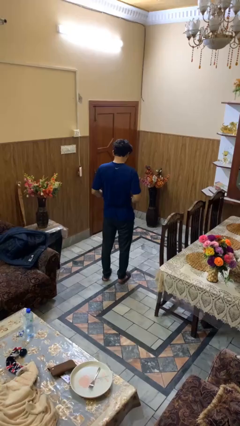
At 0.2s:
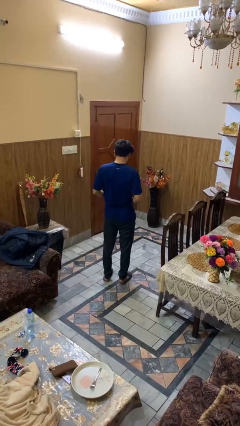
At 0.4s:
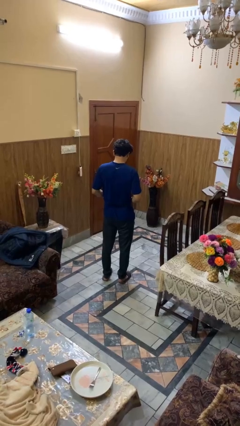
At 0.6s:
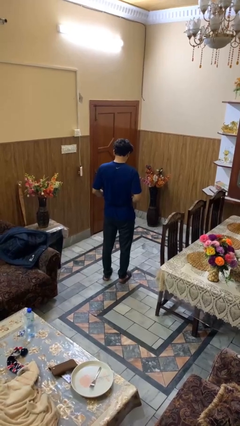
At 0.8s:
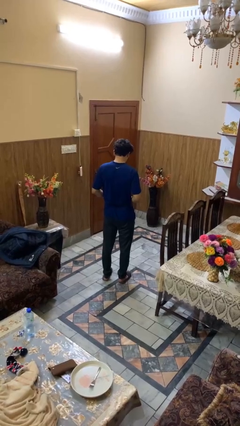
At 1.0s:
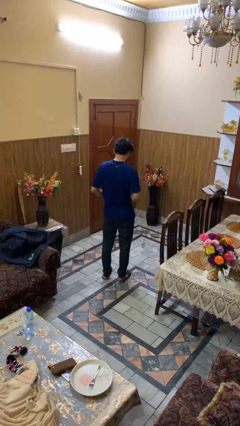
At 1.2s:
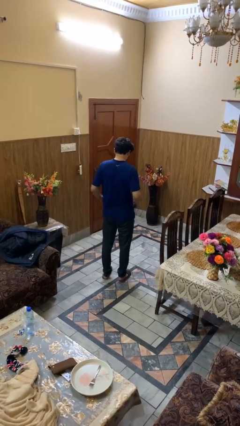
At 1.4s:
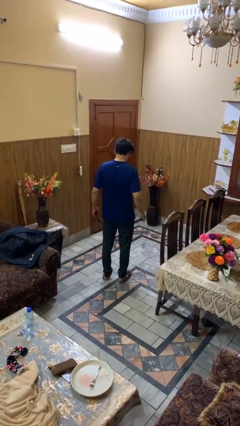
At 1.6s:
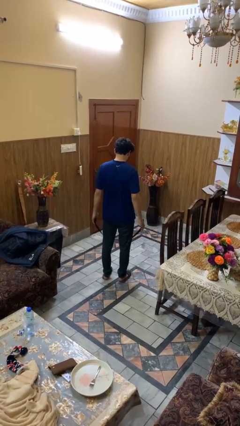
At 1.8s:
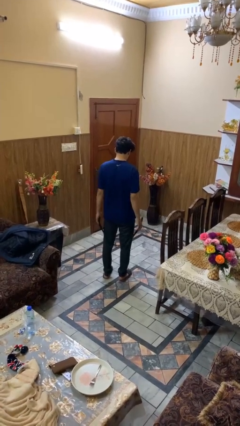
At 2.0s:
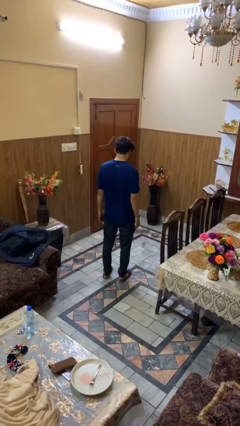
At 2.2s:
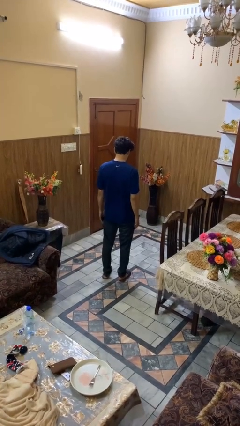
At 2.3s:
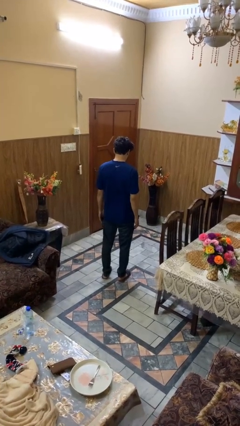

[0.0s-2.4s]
person takes off belt

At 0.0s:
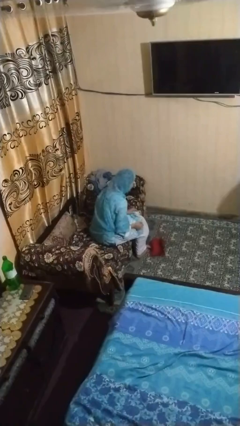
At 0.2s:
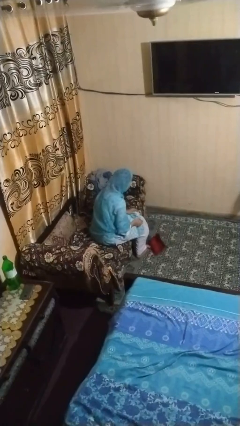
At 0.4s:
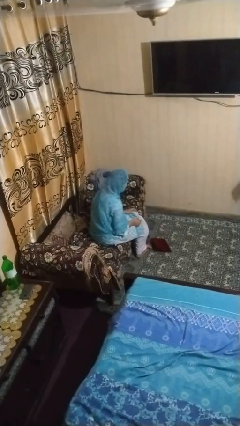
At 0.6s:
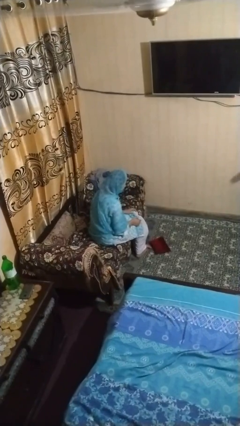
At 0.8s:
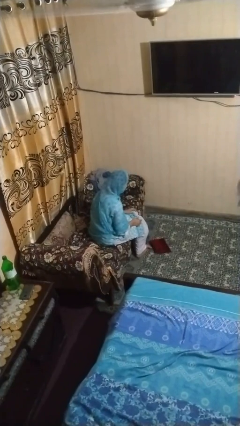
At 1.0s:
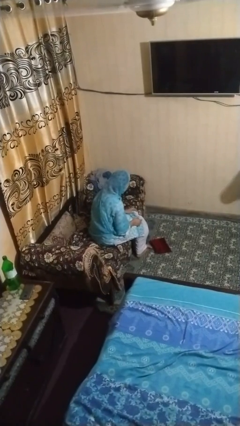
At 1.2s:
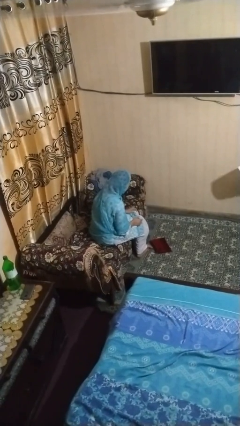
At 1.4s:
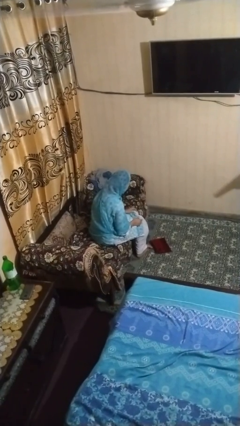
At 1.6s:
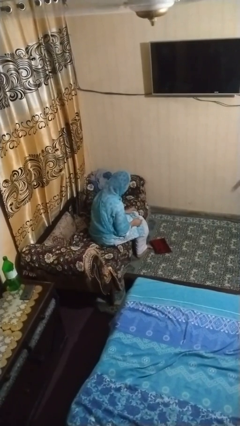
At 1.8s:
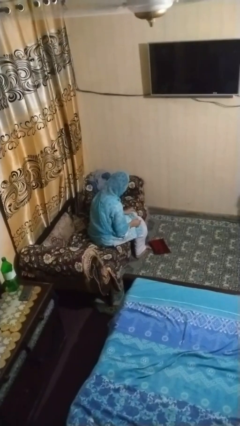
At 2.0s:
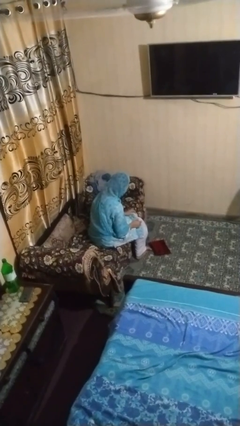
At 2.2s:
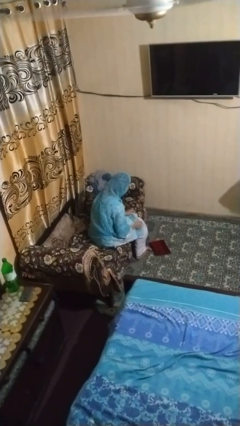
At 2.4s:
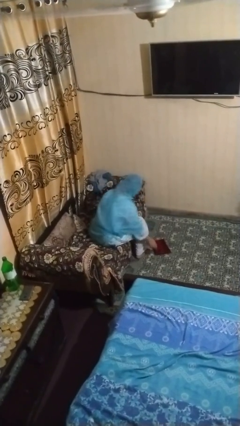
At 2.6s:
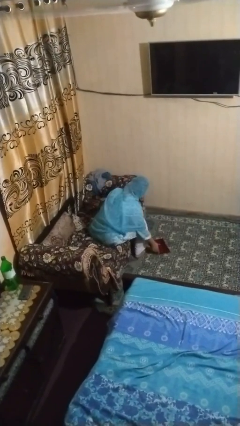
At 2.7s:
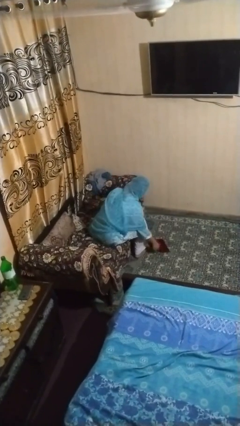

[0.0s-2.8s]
person drops object

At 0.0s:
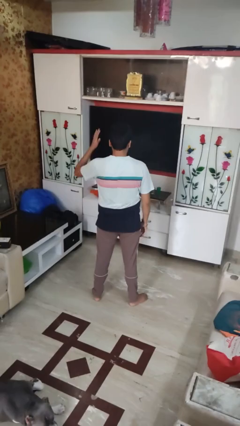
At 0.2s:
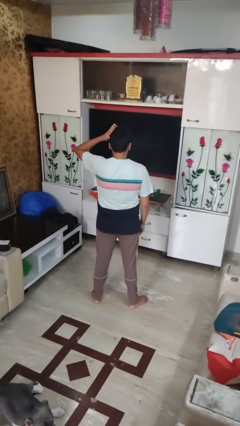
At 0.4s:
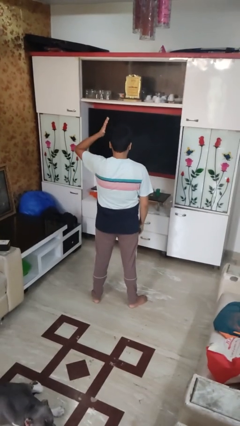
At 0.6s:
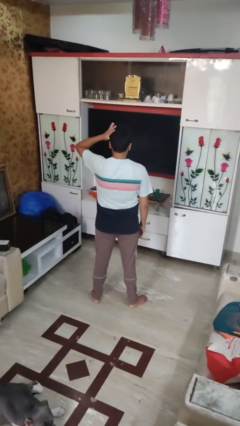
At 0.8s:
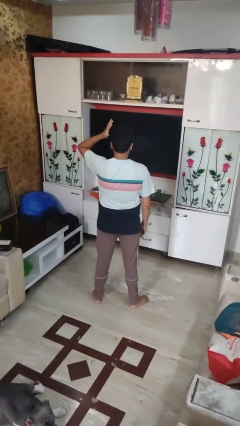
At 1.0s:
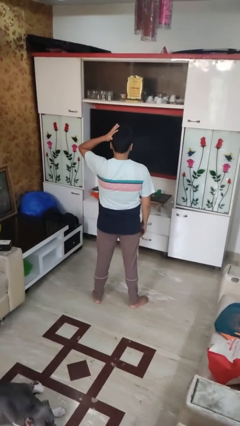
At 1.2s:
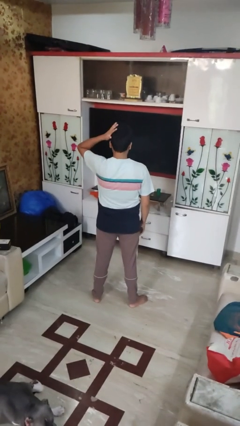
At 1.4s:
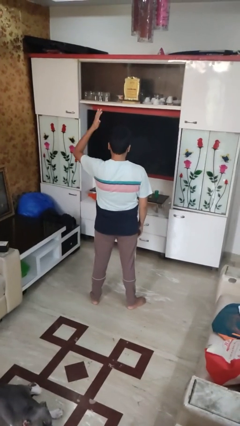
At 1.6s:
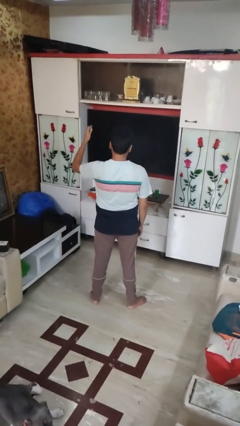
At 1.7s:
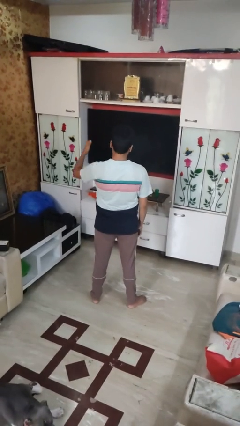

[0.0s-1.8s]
person pats head

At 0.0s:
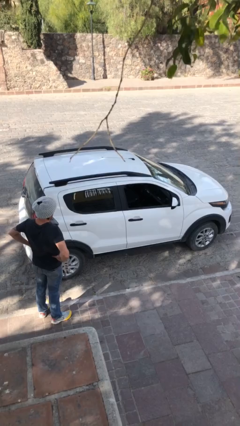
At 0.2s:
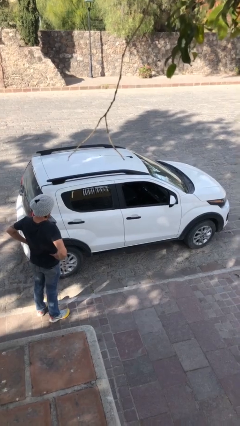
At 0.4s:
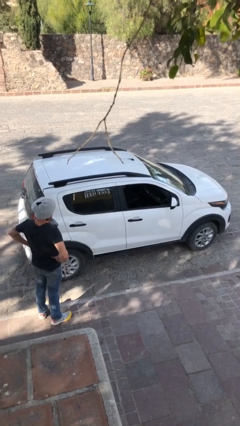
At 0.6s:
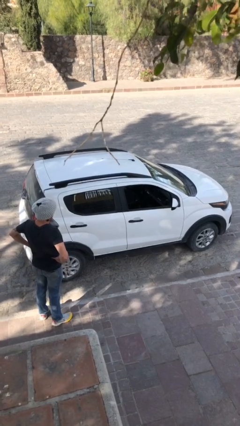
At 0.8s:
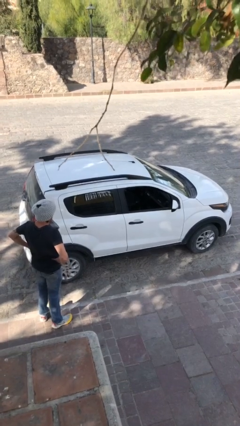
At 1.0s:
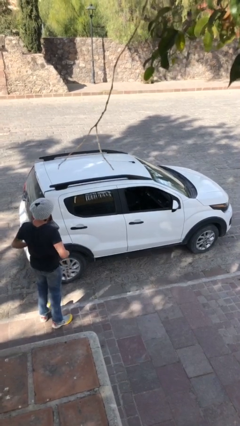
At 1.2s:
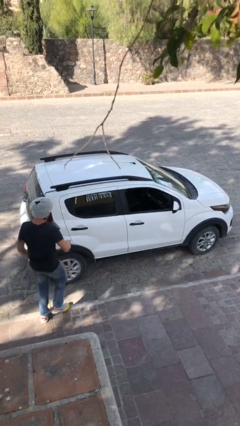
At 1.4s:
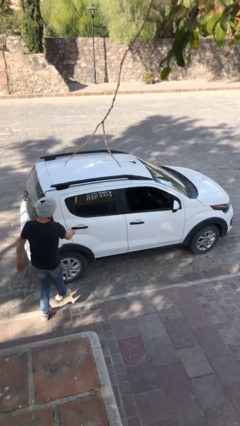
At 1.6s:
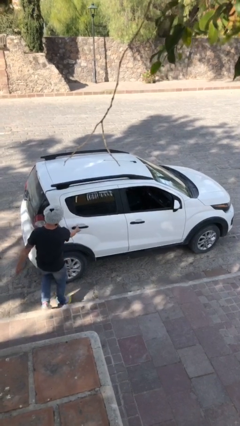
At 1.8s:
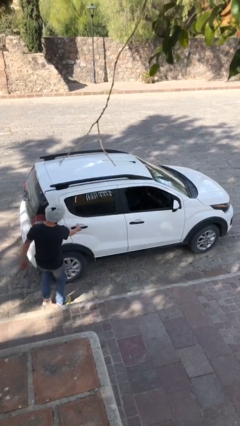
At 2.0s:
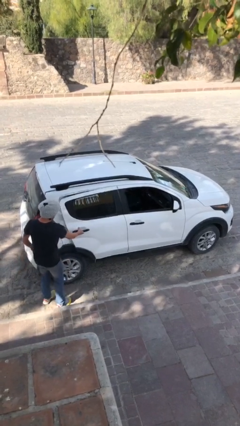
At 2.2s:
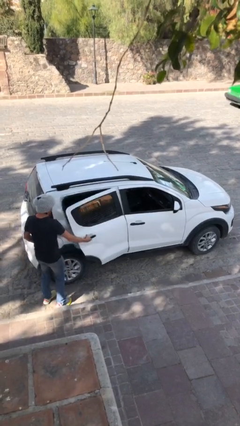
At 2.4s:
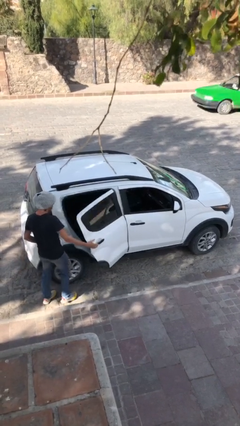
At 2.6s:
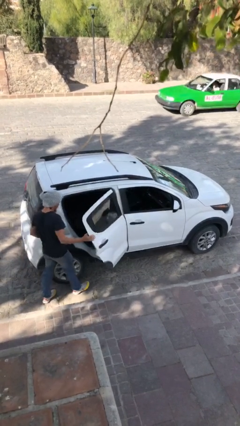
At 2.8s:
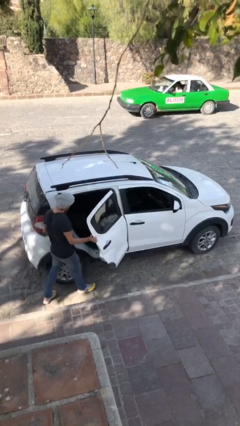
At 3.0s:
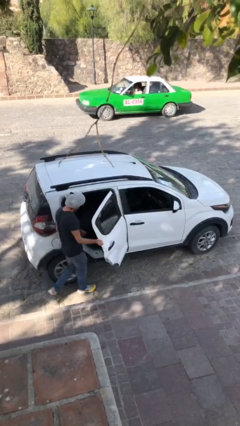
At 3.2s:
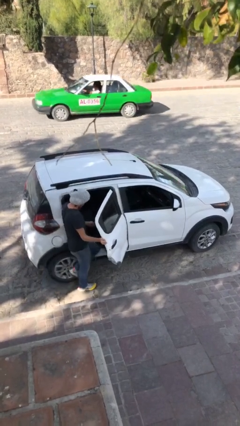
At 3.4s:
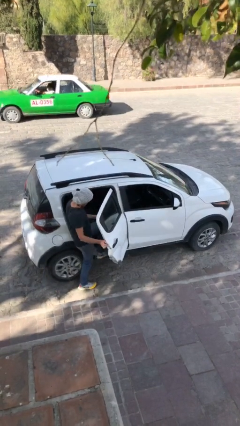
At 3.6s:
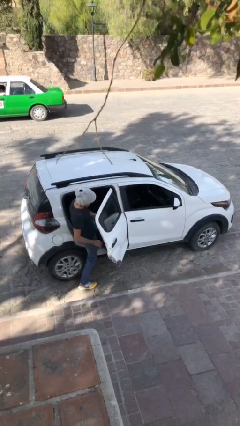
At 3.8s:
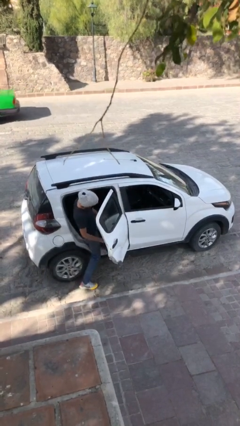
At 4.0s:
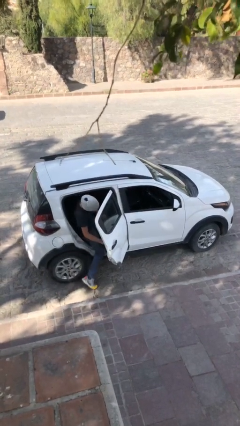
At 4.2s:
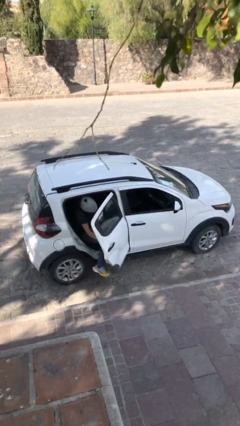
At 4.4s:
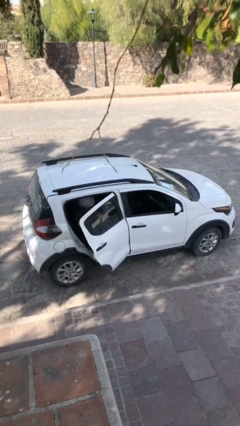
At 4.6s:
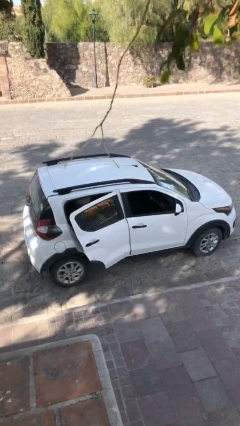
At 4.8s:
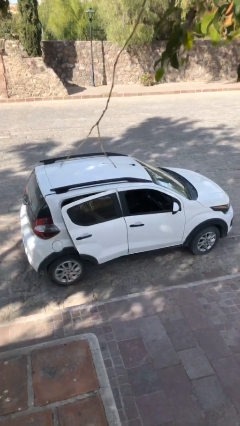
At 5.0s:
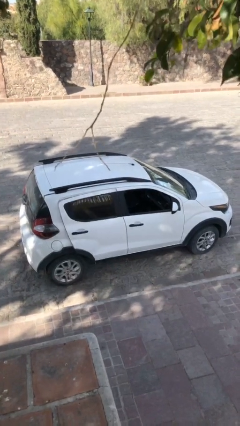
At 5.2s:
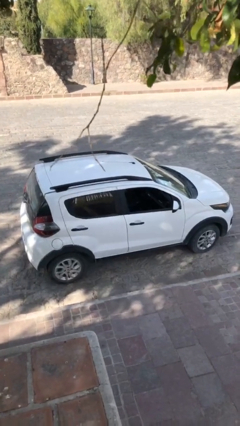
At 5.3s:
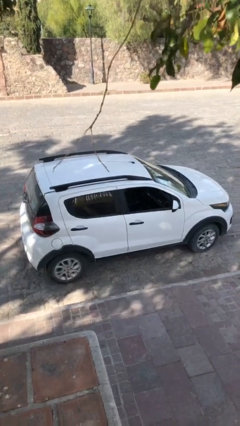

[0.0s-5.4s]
car picks up person

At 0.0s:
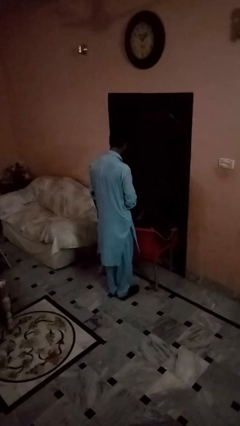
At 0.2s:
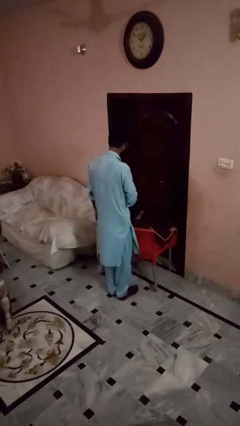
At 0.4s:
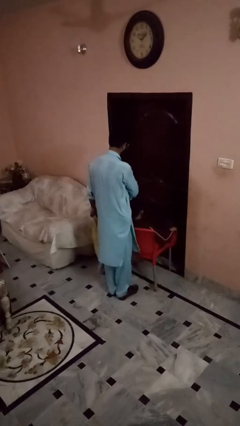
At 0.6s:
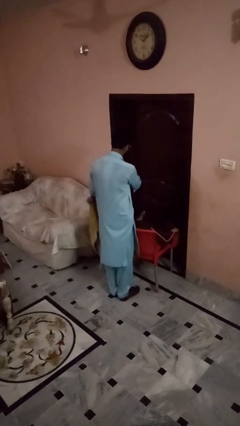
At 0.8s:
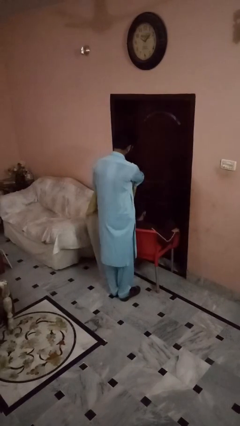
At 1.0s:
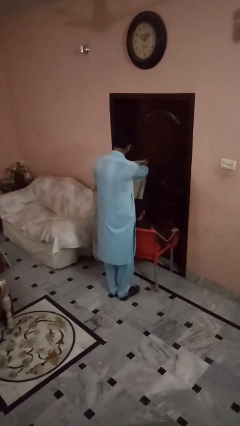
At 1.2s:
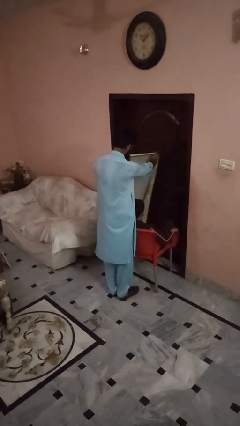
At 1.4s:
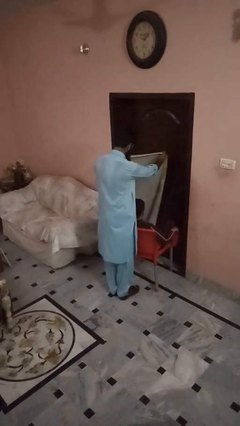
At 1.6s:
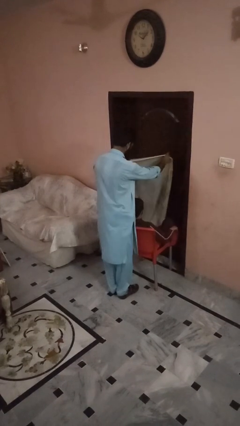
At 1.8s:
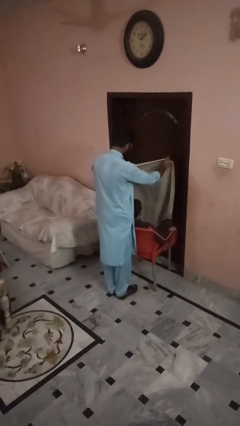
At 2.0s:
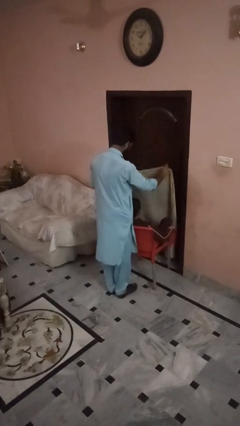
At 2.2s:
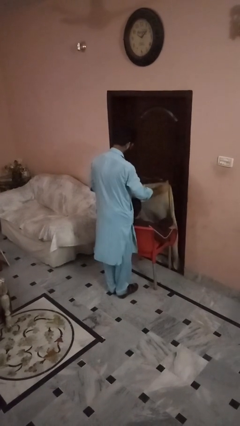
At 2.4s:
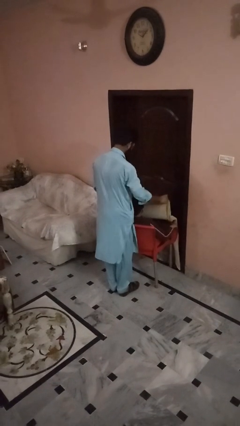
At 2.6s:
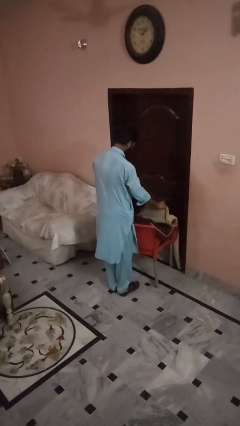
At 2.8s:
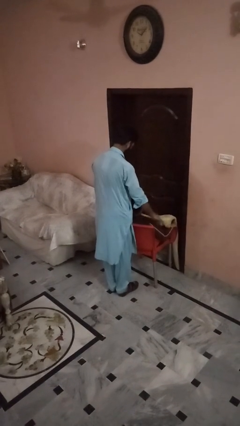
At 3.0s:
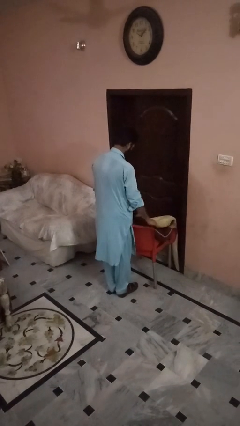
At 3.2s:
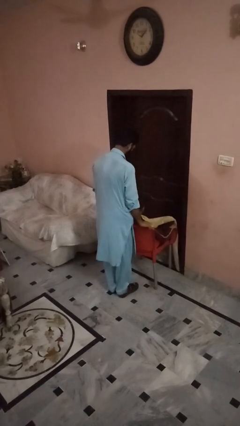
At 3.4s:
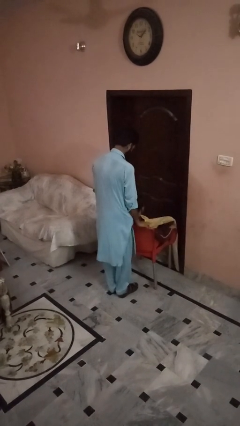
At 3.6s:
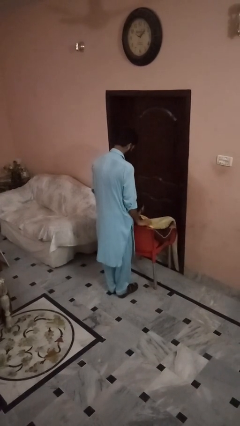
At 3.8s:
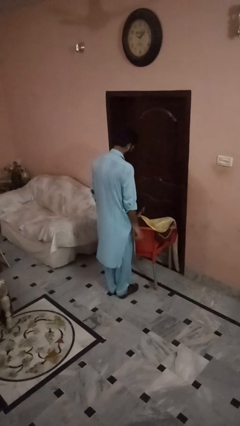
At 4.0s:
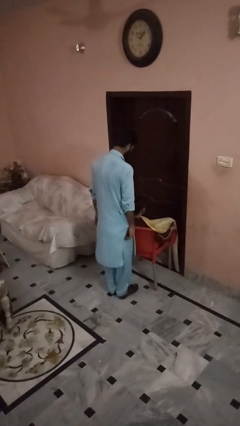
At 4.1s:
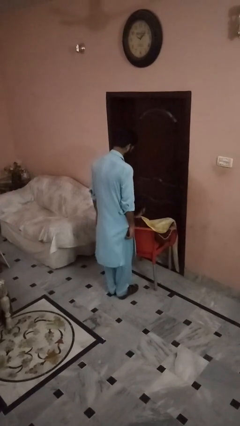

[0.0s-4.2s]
person covers friend with blanket

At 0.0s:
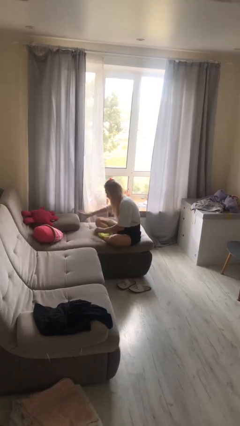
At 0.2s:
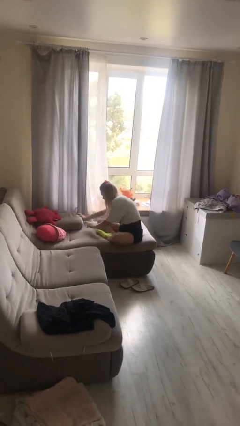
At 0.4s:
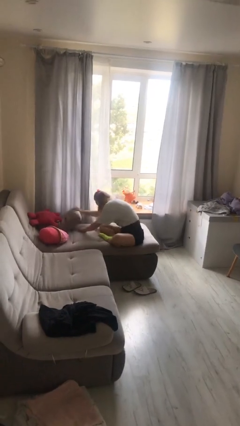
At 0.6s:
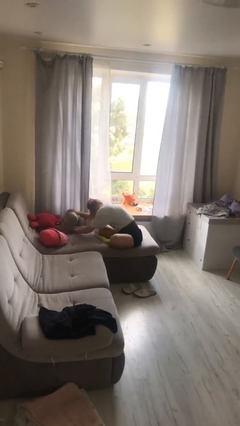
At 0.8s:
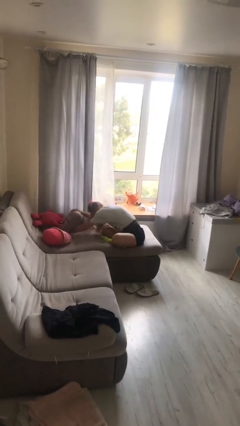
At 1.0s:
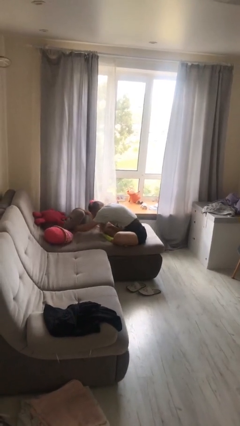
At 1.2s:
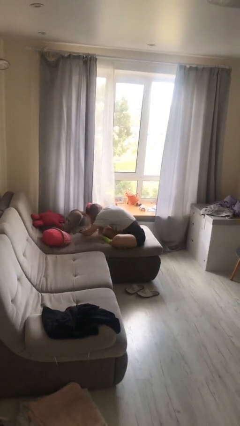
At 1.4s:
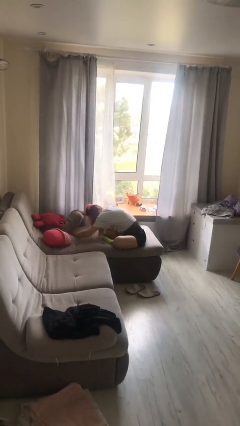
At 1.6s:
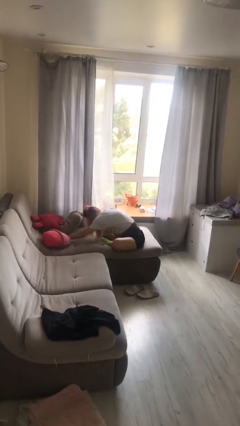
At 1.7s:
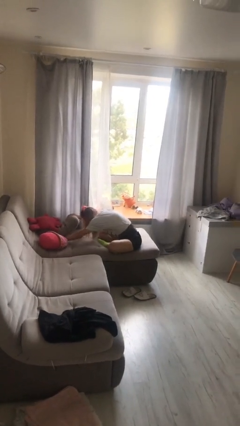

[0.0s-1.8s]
person searches in couch
